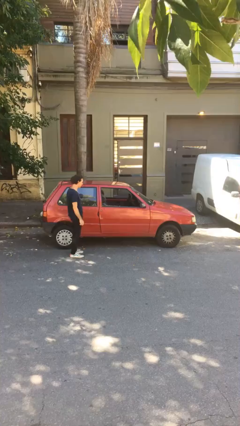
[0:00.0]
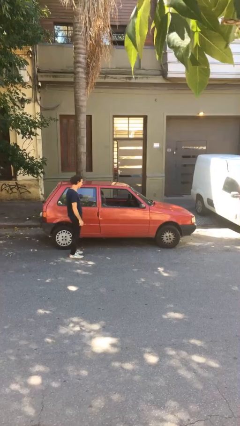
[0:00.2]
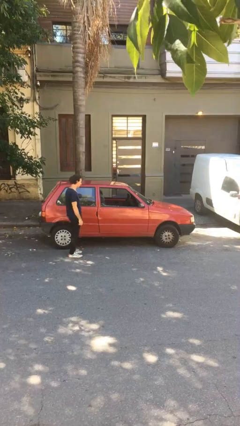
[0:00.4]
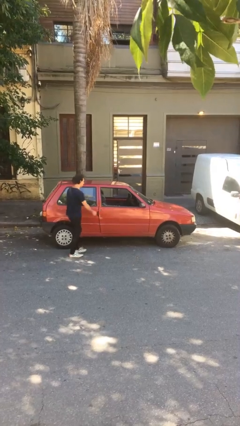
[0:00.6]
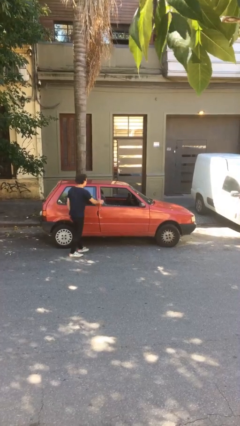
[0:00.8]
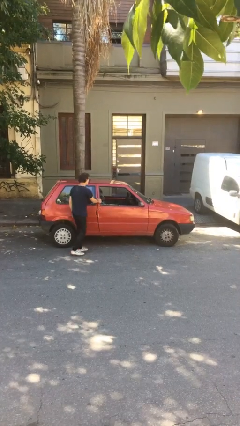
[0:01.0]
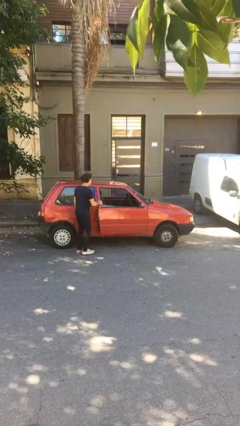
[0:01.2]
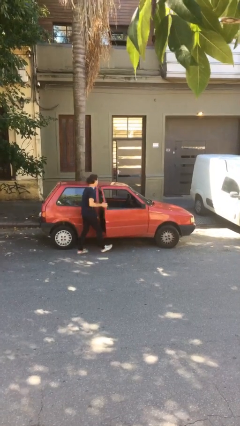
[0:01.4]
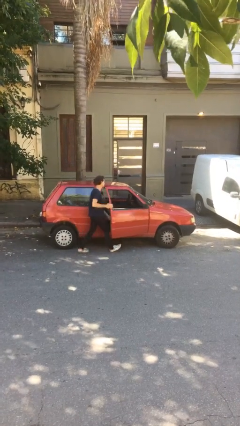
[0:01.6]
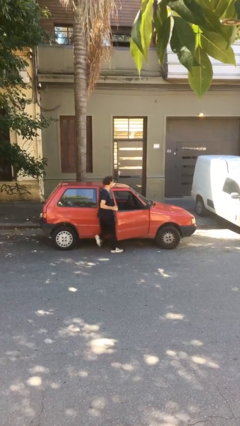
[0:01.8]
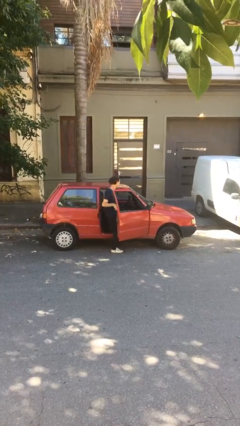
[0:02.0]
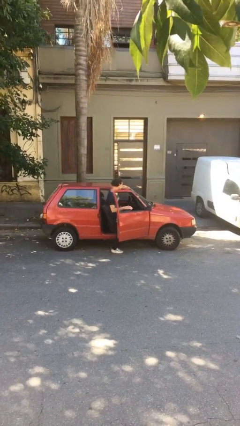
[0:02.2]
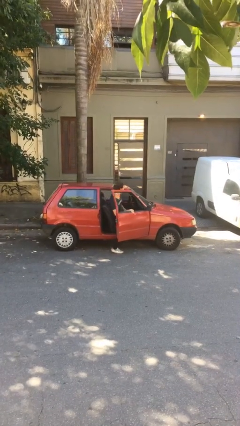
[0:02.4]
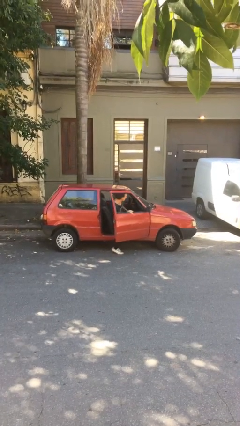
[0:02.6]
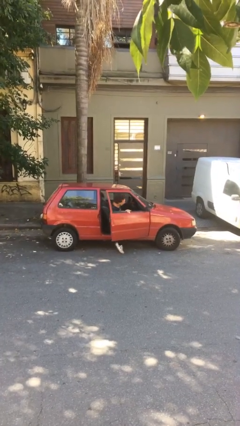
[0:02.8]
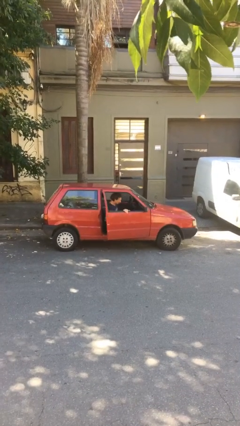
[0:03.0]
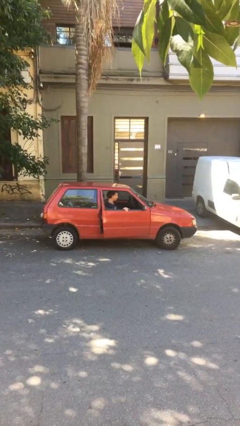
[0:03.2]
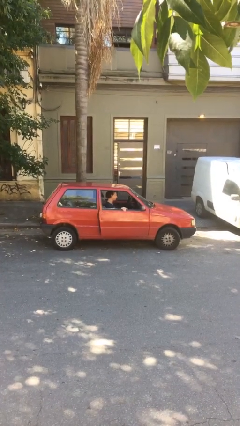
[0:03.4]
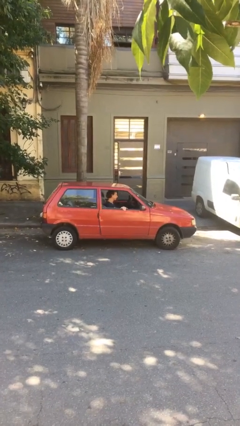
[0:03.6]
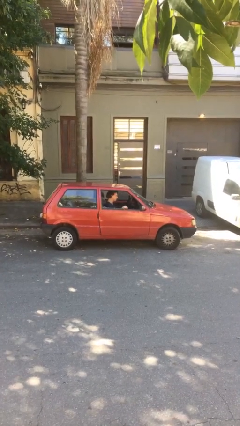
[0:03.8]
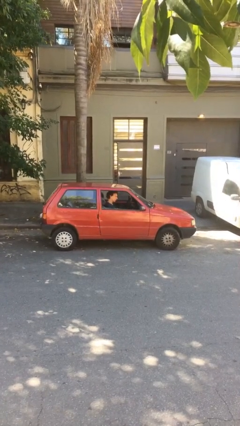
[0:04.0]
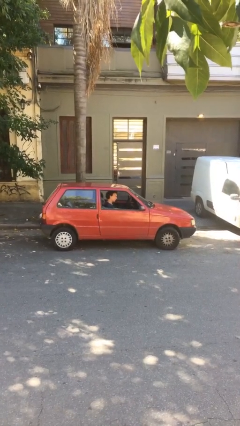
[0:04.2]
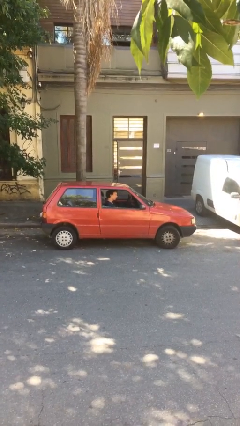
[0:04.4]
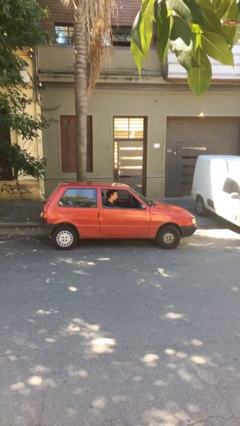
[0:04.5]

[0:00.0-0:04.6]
car picks up person

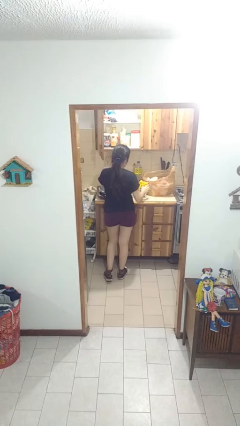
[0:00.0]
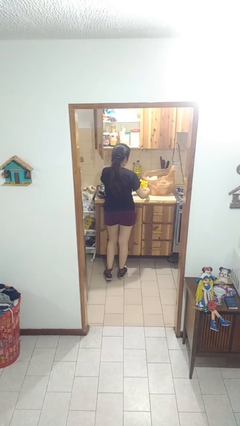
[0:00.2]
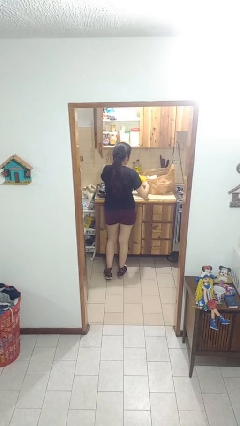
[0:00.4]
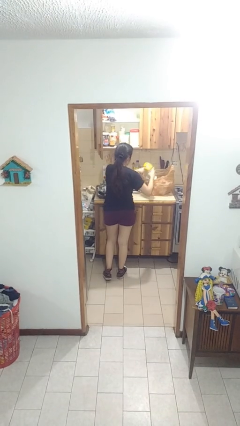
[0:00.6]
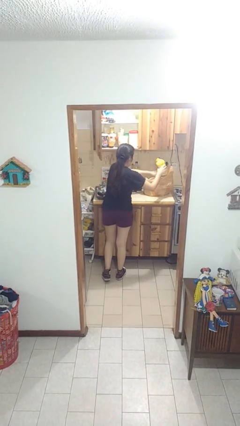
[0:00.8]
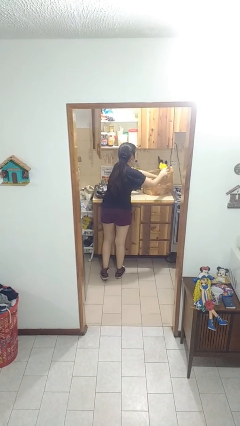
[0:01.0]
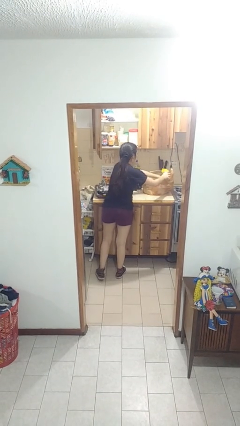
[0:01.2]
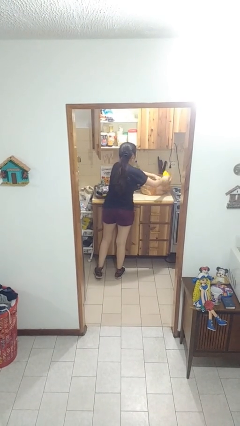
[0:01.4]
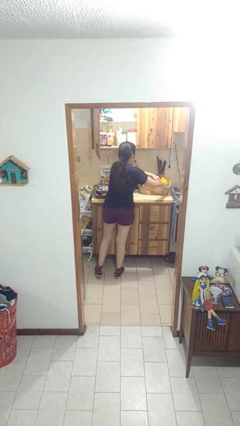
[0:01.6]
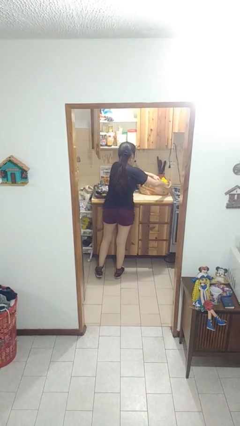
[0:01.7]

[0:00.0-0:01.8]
person puts object into bag

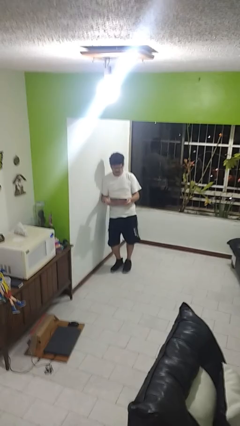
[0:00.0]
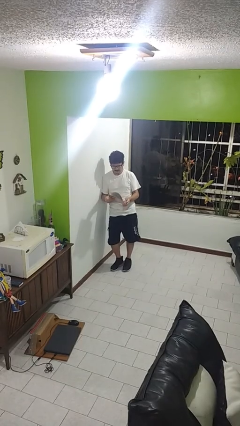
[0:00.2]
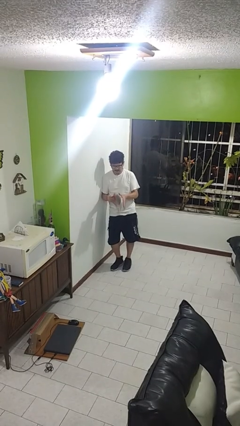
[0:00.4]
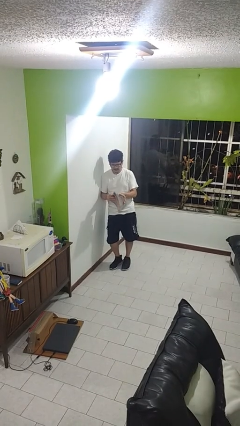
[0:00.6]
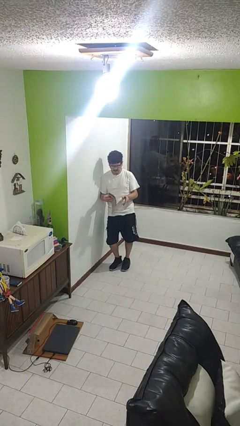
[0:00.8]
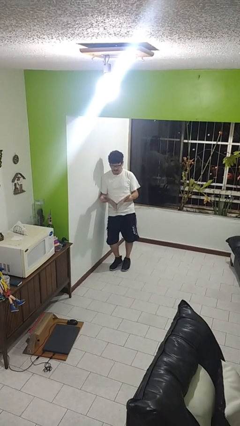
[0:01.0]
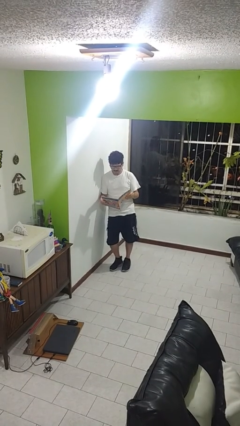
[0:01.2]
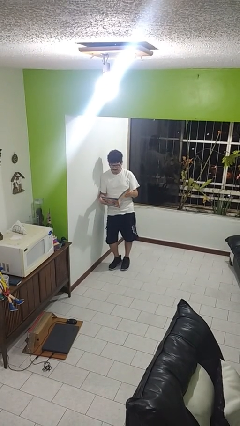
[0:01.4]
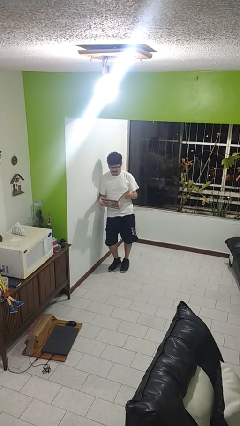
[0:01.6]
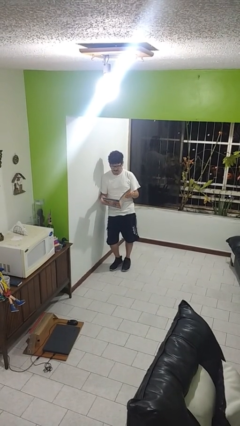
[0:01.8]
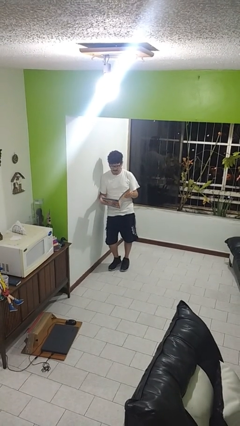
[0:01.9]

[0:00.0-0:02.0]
person reads magazine

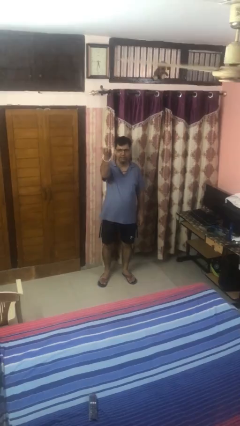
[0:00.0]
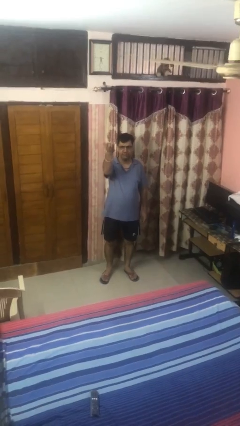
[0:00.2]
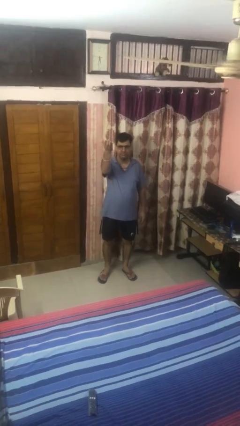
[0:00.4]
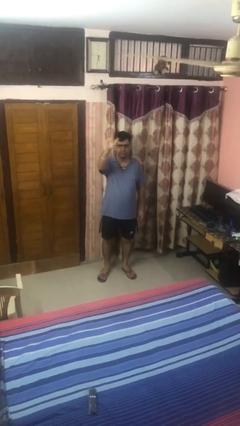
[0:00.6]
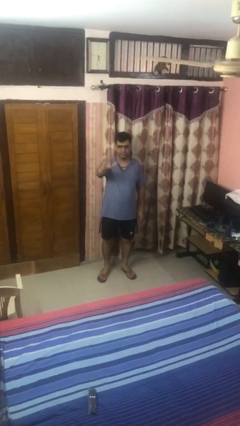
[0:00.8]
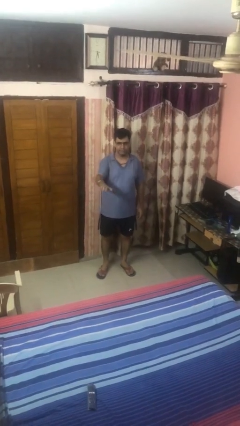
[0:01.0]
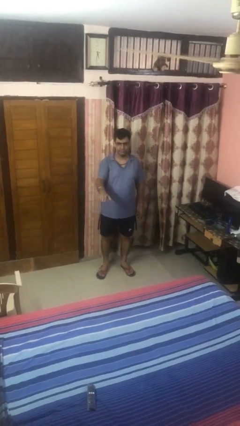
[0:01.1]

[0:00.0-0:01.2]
person gestures swipe down

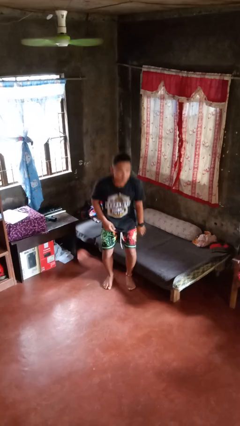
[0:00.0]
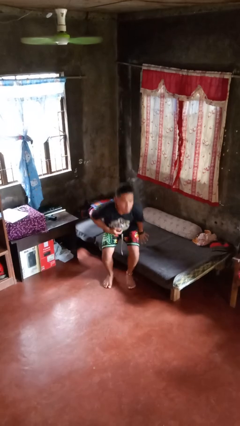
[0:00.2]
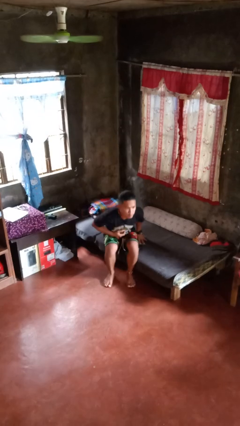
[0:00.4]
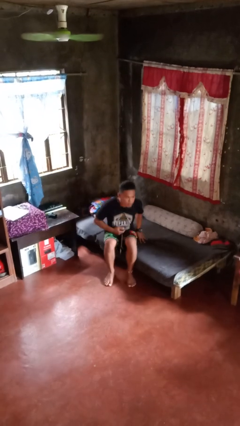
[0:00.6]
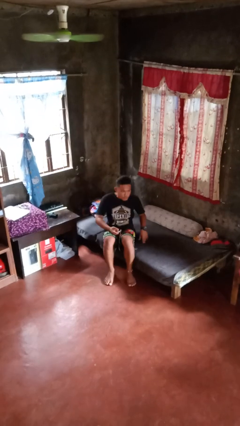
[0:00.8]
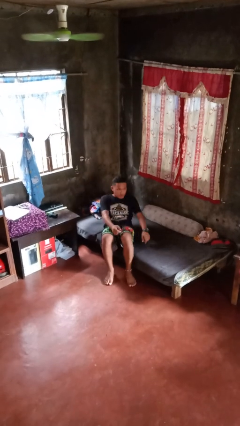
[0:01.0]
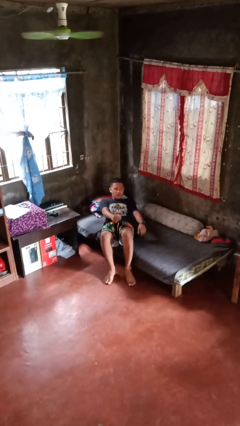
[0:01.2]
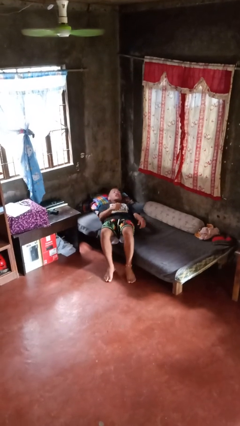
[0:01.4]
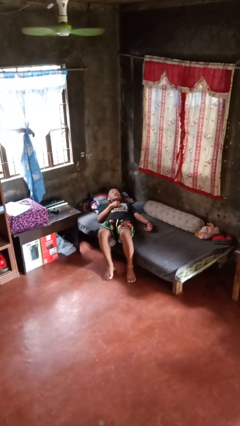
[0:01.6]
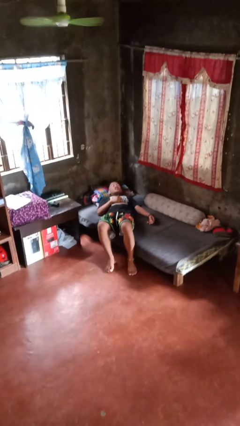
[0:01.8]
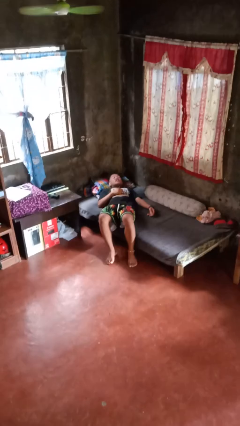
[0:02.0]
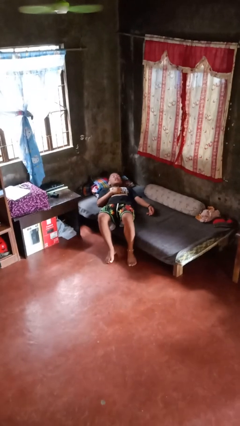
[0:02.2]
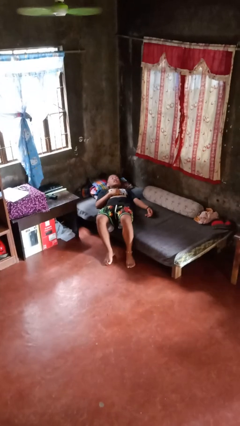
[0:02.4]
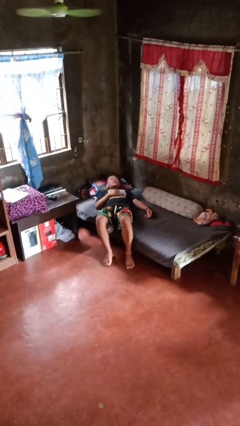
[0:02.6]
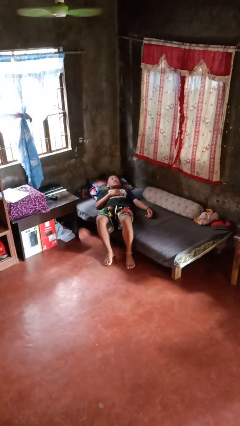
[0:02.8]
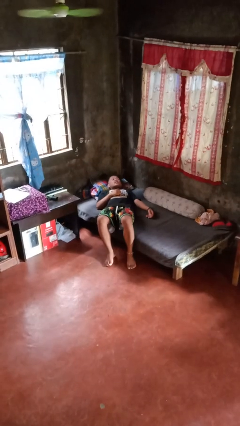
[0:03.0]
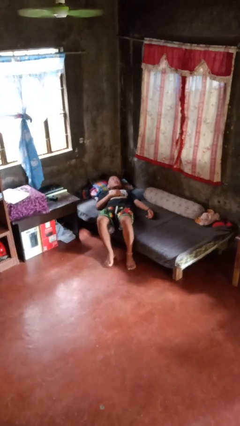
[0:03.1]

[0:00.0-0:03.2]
person lies down on bed

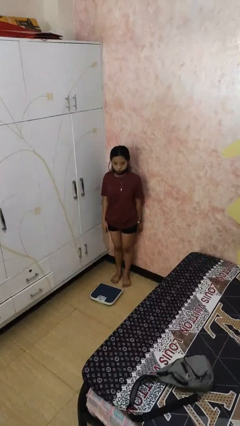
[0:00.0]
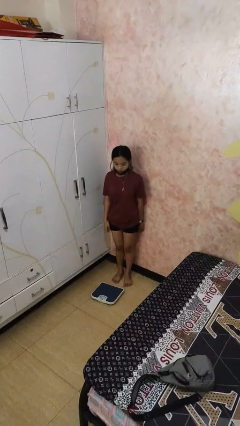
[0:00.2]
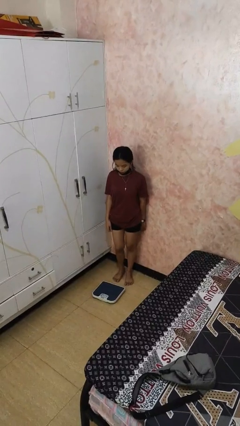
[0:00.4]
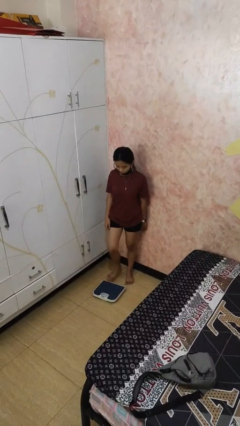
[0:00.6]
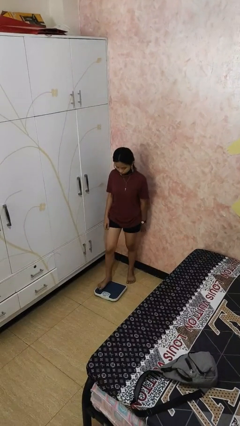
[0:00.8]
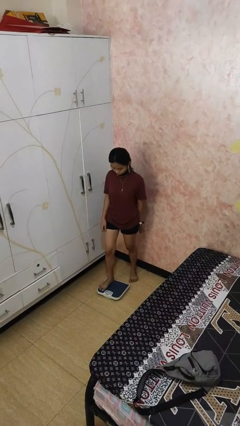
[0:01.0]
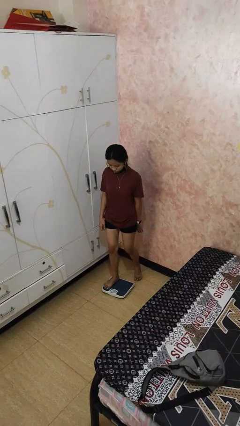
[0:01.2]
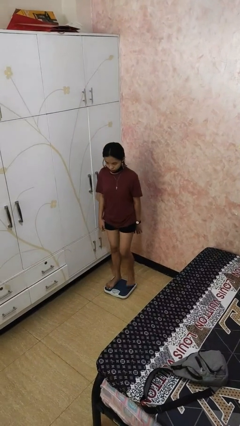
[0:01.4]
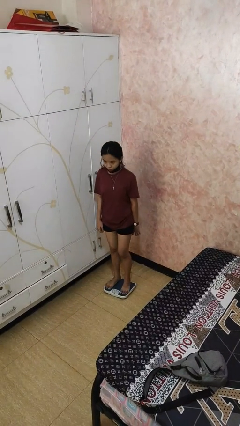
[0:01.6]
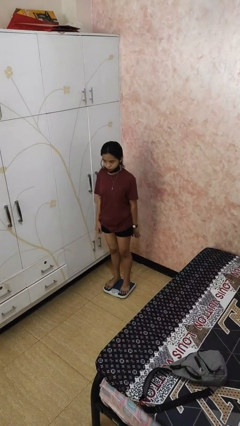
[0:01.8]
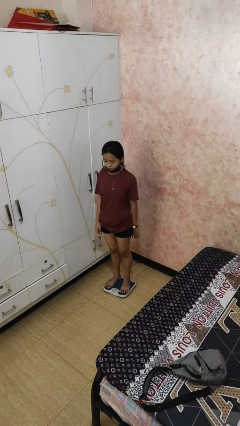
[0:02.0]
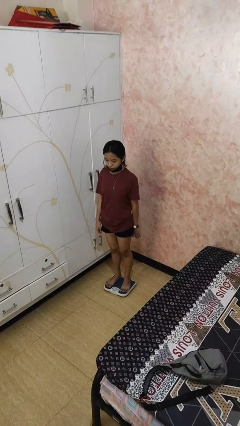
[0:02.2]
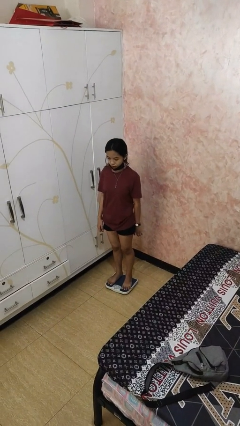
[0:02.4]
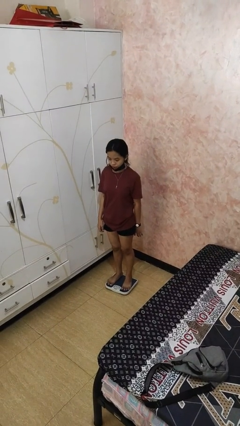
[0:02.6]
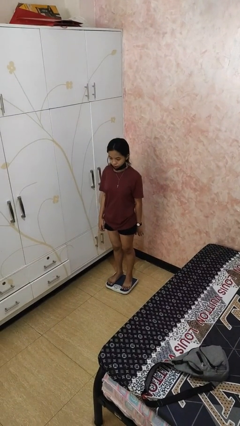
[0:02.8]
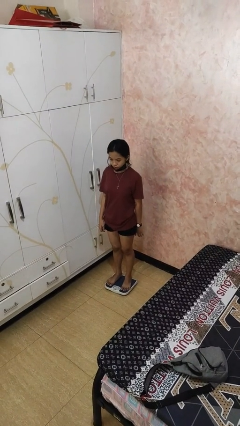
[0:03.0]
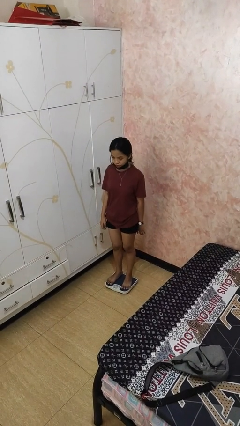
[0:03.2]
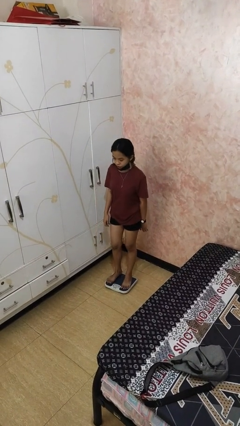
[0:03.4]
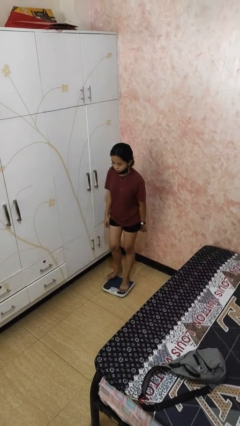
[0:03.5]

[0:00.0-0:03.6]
person uses bodyweight scale

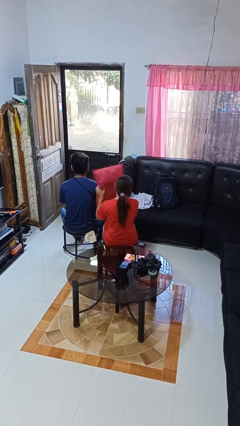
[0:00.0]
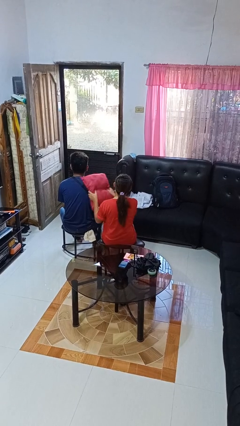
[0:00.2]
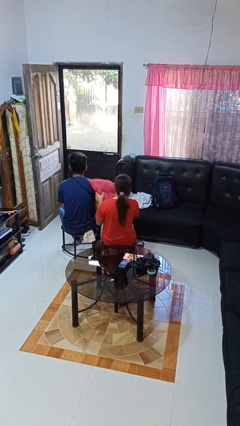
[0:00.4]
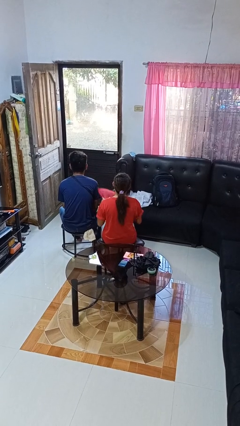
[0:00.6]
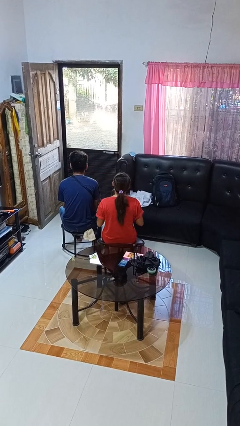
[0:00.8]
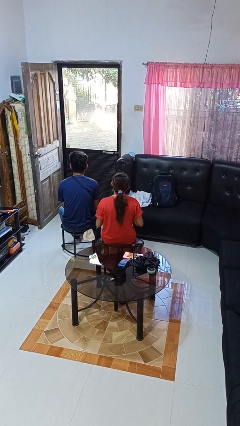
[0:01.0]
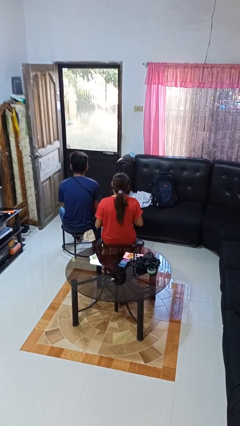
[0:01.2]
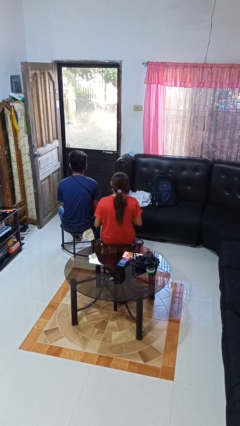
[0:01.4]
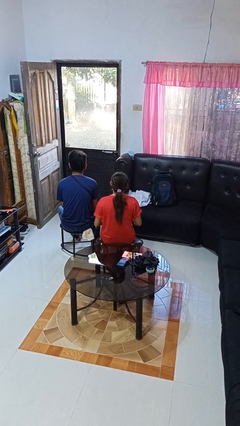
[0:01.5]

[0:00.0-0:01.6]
person hits person with pillow
